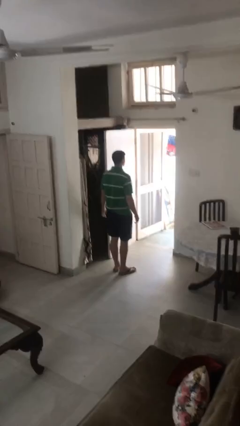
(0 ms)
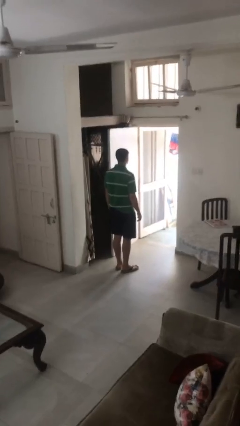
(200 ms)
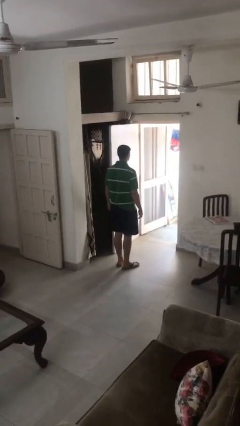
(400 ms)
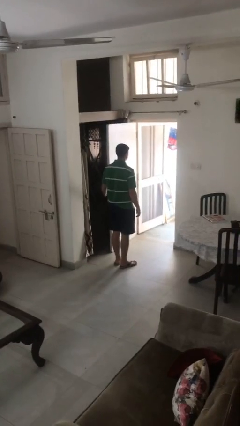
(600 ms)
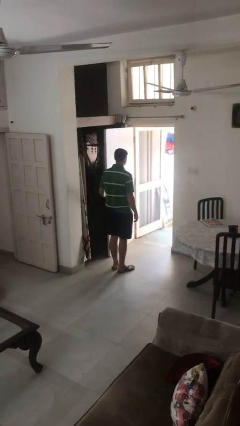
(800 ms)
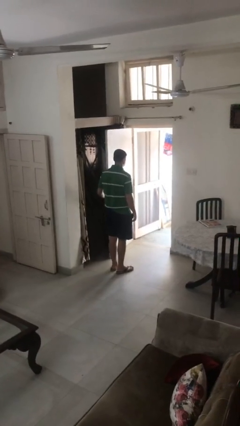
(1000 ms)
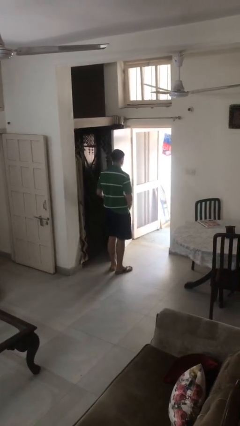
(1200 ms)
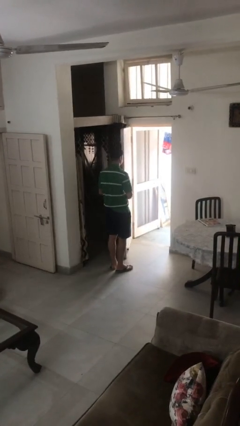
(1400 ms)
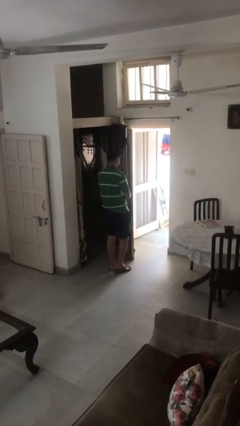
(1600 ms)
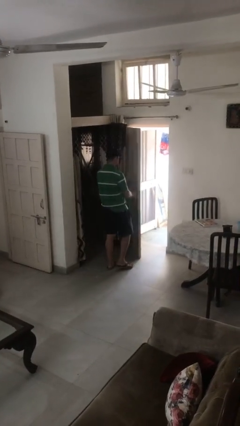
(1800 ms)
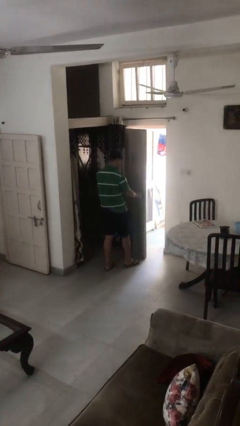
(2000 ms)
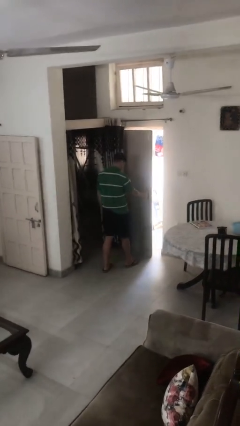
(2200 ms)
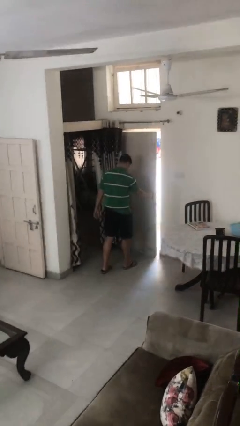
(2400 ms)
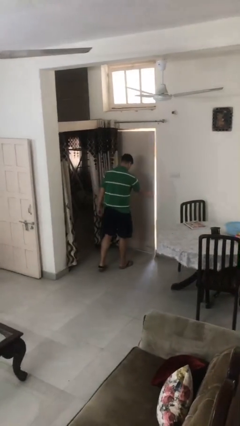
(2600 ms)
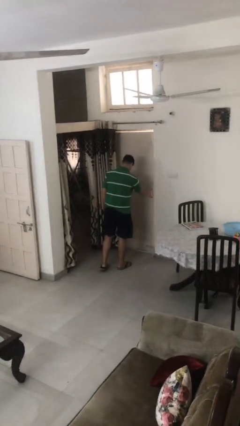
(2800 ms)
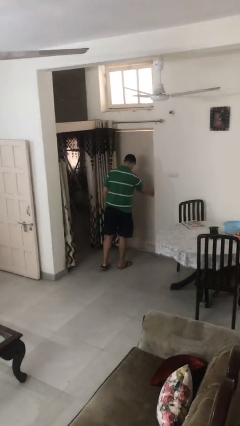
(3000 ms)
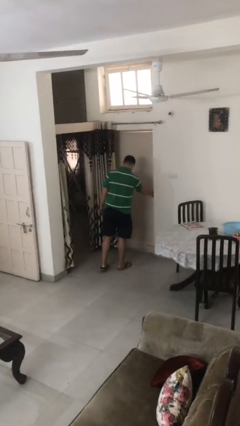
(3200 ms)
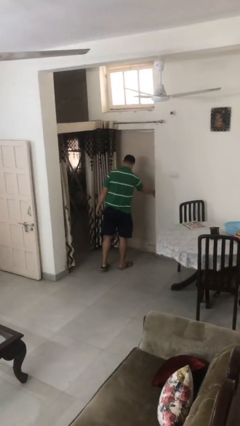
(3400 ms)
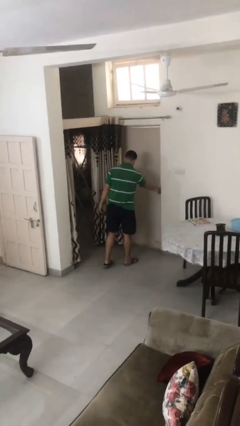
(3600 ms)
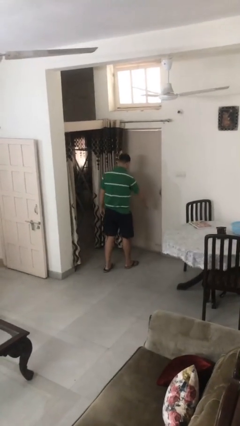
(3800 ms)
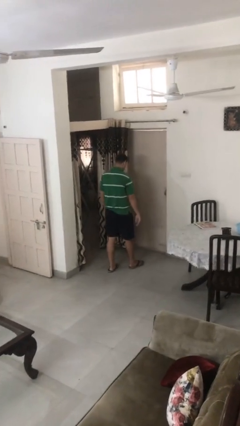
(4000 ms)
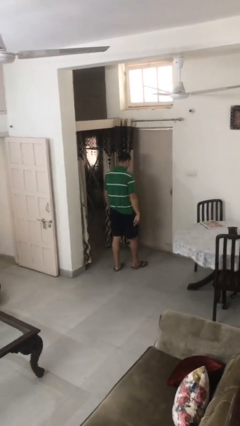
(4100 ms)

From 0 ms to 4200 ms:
person closes facility door

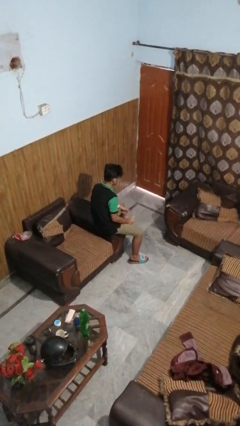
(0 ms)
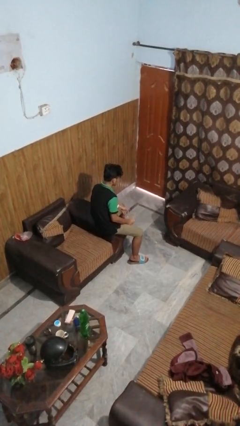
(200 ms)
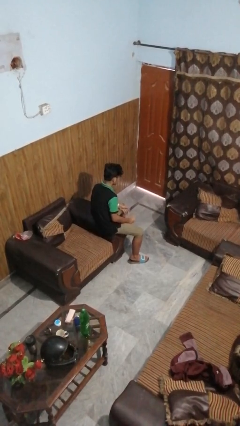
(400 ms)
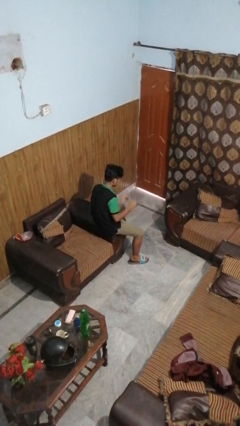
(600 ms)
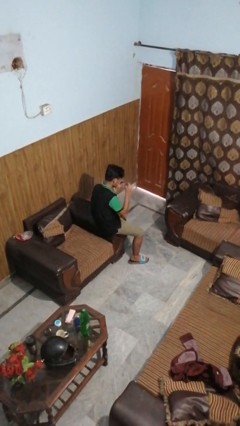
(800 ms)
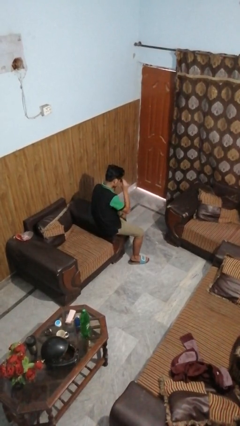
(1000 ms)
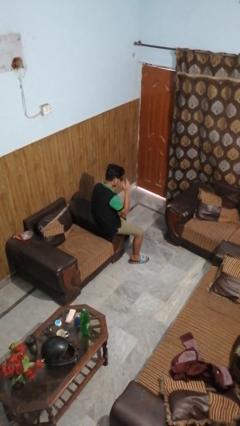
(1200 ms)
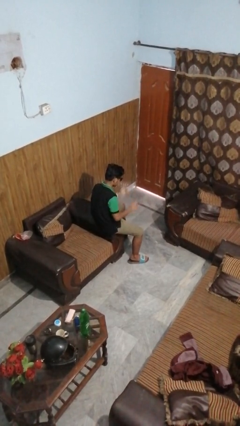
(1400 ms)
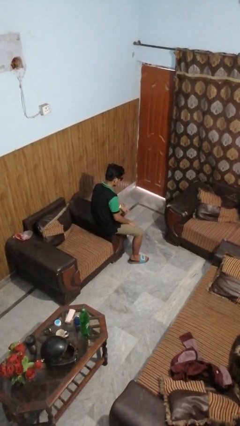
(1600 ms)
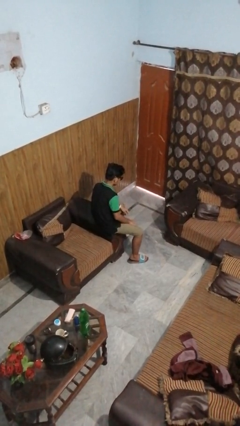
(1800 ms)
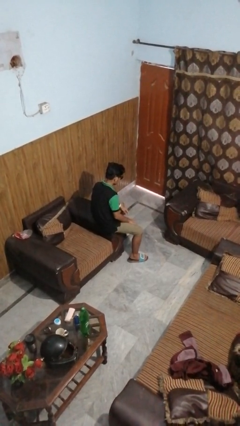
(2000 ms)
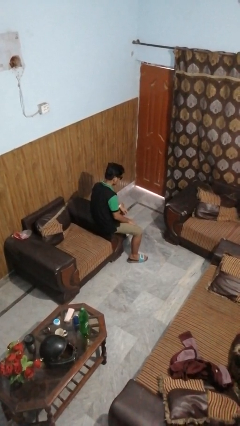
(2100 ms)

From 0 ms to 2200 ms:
person puts on sunglasses

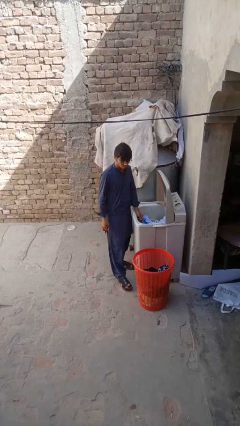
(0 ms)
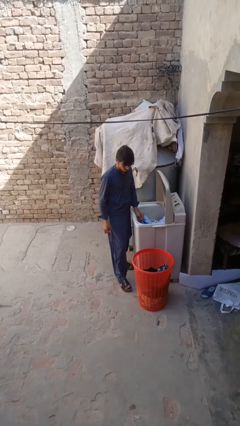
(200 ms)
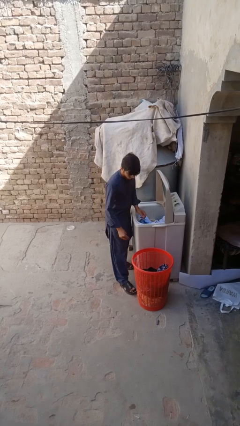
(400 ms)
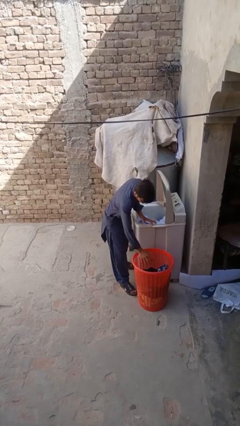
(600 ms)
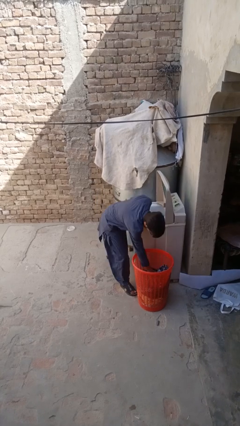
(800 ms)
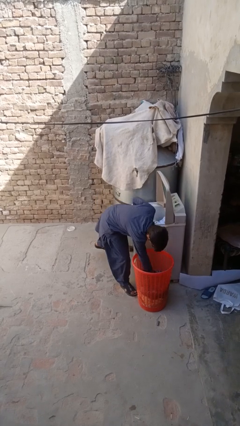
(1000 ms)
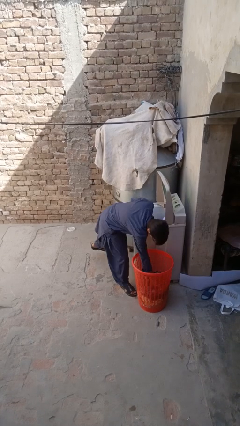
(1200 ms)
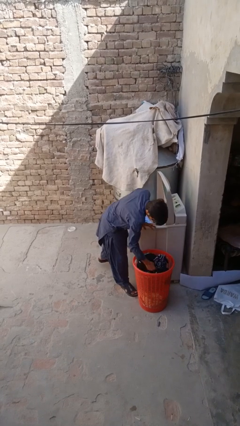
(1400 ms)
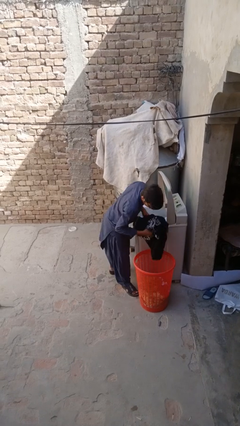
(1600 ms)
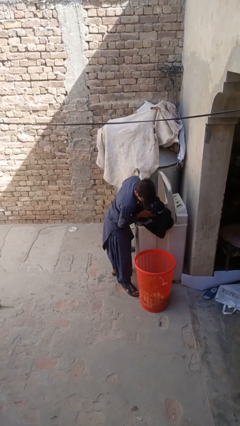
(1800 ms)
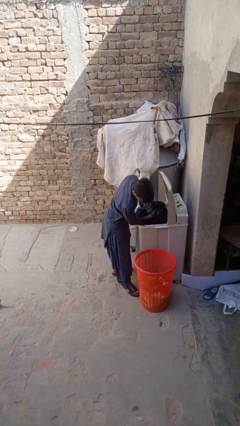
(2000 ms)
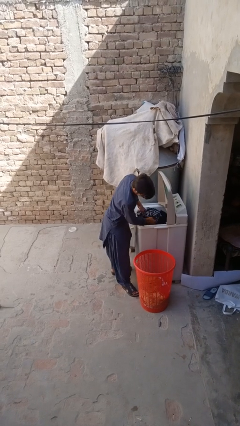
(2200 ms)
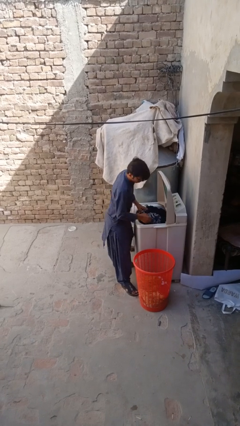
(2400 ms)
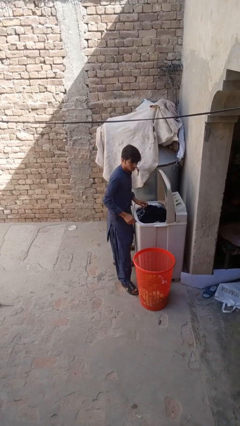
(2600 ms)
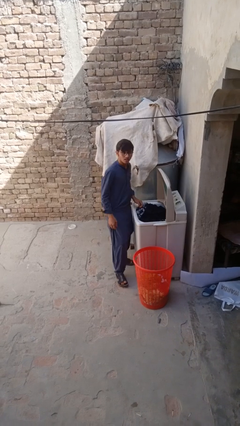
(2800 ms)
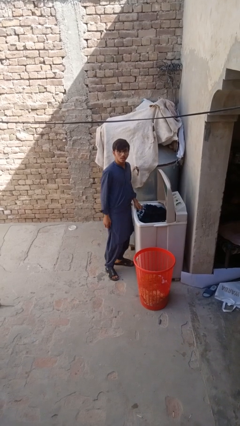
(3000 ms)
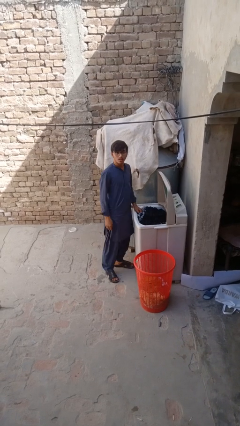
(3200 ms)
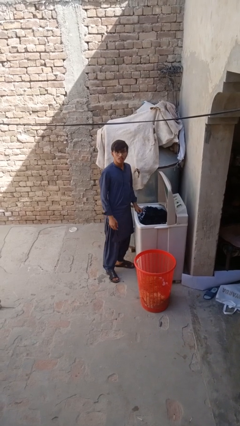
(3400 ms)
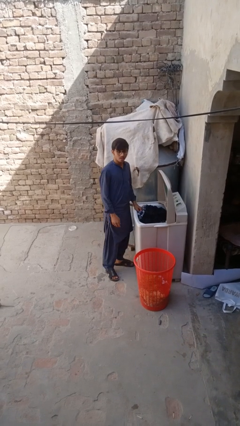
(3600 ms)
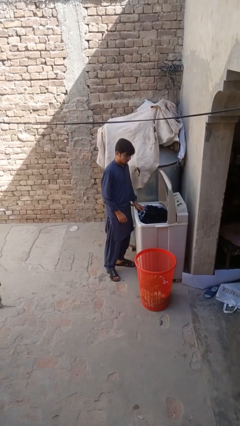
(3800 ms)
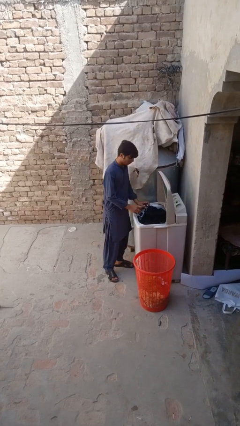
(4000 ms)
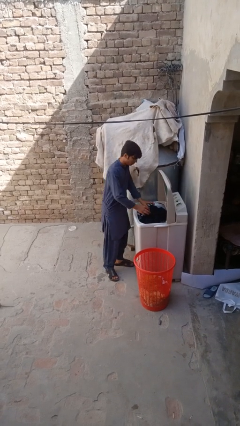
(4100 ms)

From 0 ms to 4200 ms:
person loads clotheswasher

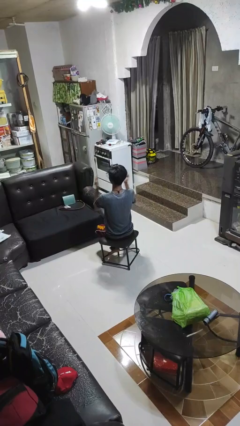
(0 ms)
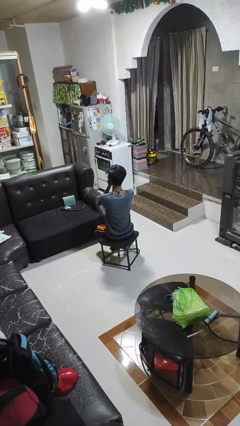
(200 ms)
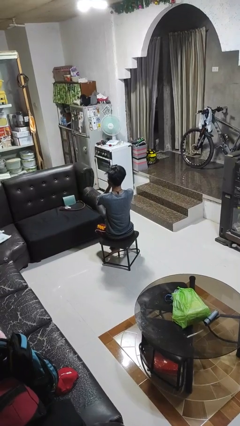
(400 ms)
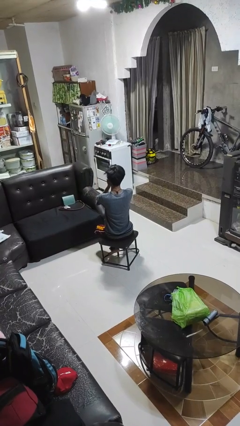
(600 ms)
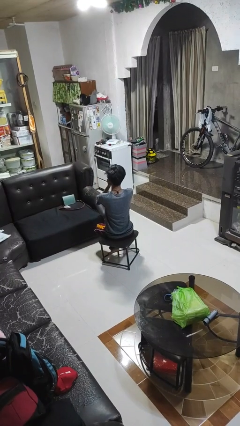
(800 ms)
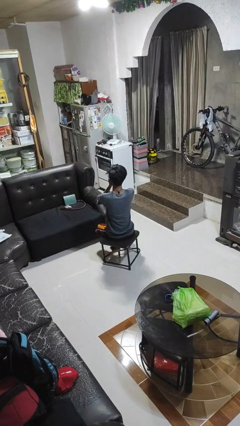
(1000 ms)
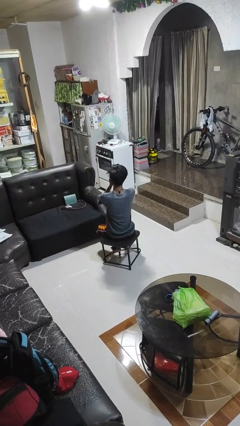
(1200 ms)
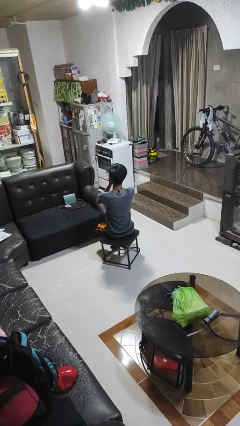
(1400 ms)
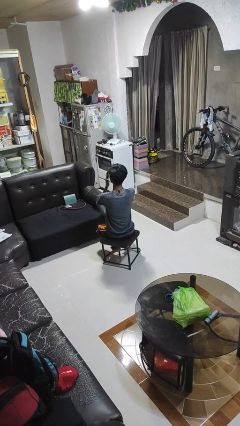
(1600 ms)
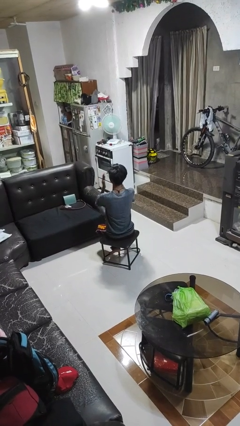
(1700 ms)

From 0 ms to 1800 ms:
person covers face with hands

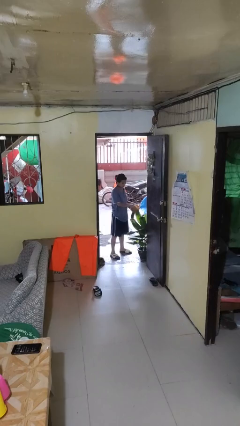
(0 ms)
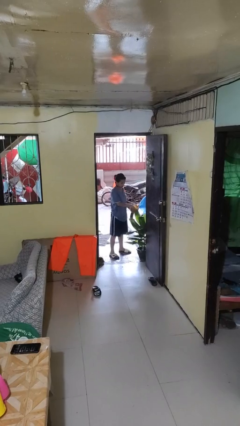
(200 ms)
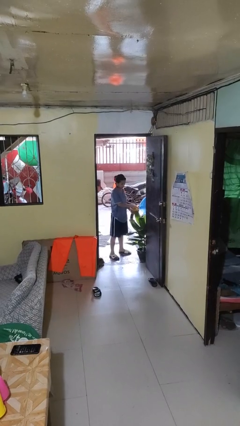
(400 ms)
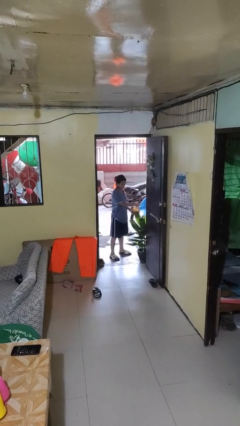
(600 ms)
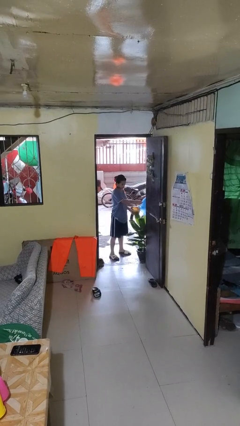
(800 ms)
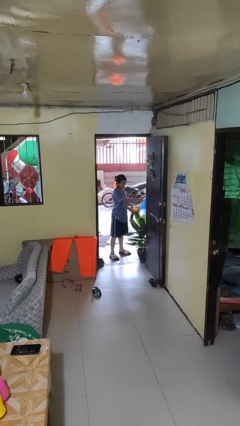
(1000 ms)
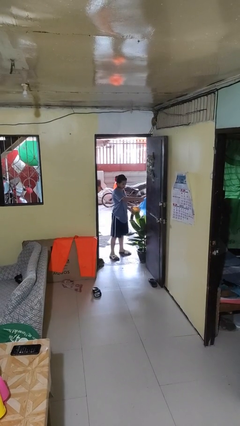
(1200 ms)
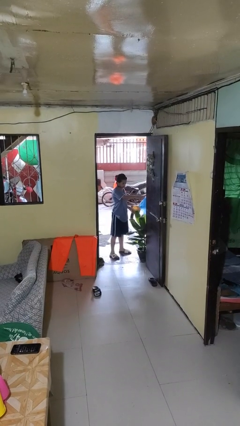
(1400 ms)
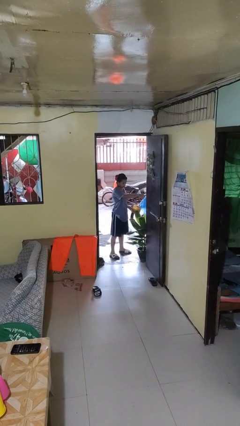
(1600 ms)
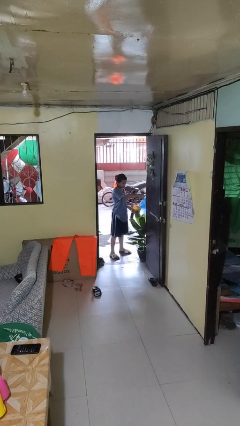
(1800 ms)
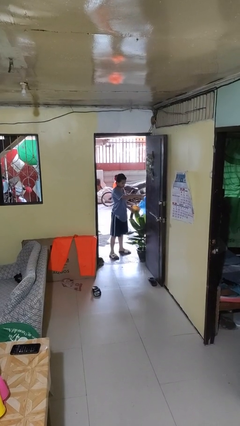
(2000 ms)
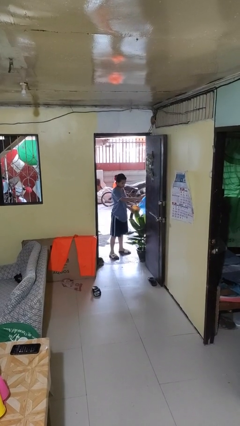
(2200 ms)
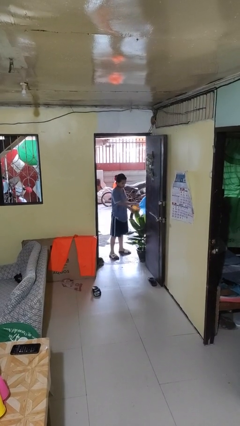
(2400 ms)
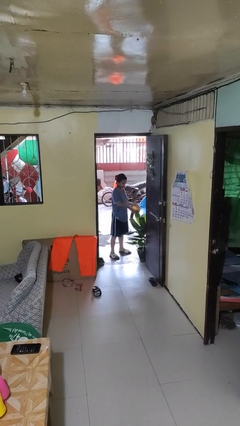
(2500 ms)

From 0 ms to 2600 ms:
person waters houseplant

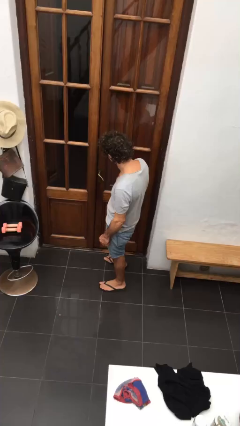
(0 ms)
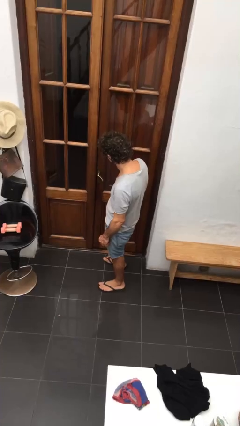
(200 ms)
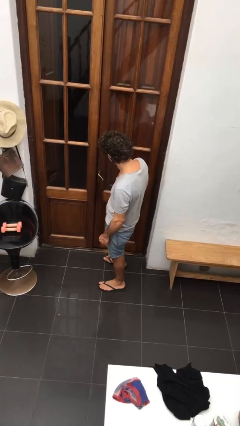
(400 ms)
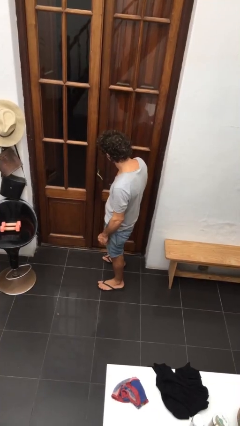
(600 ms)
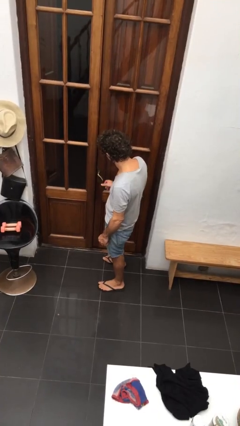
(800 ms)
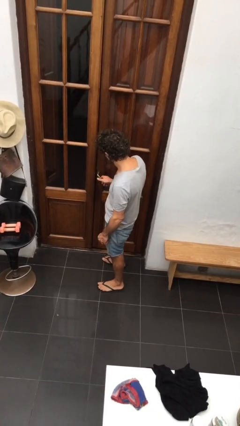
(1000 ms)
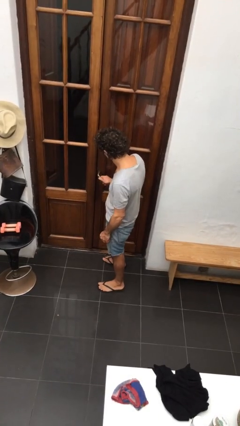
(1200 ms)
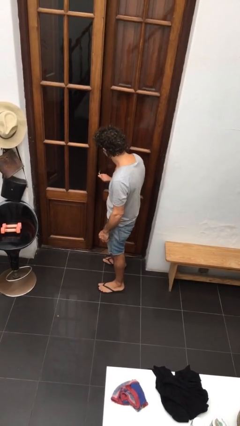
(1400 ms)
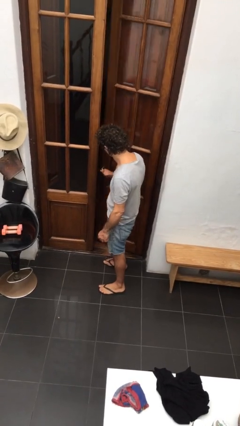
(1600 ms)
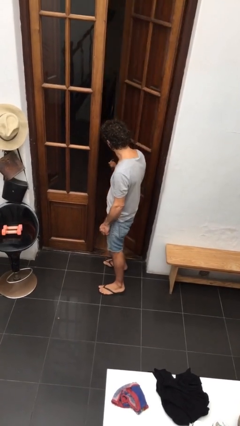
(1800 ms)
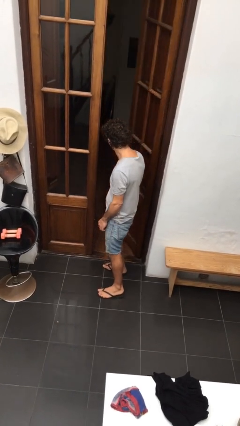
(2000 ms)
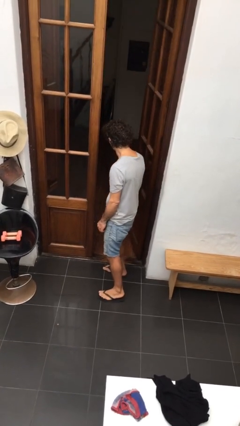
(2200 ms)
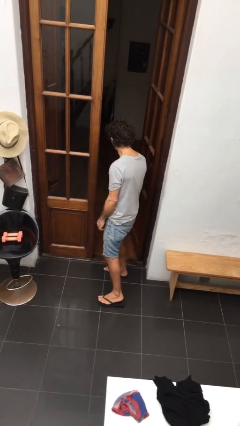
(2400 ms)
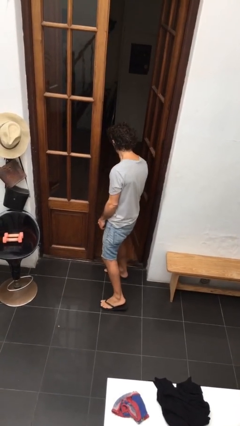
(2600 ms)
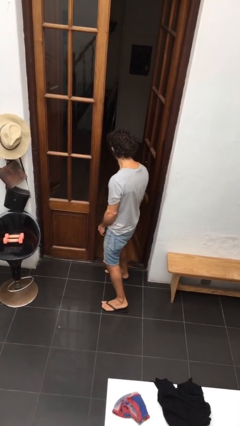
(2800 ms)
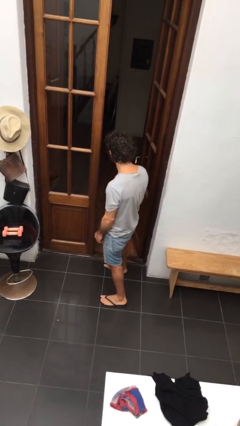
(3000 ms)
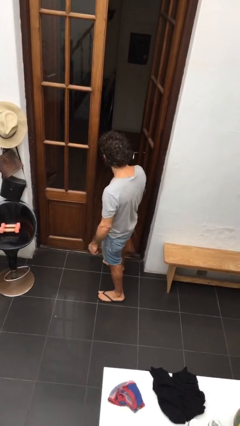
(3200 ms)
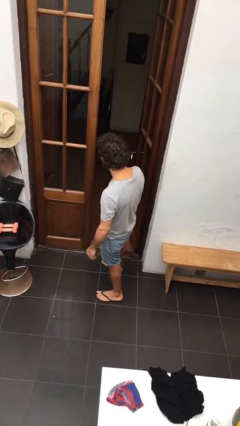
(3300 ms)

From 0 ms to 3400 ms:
person opens facility door
